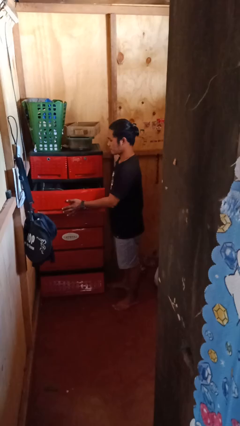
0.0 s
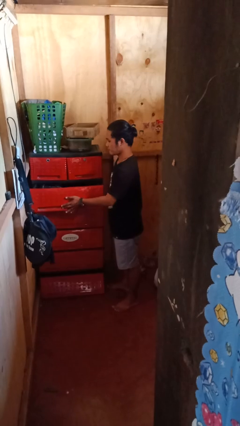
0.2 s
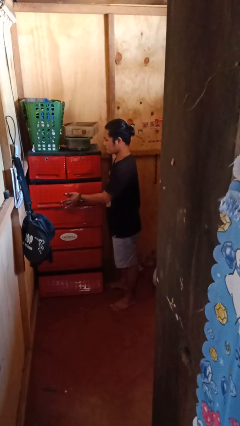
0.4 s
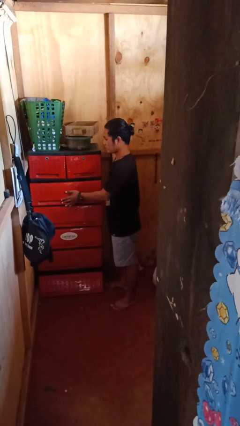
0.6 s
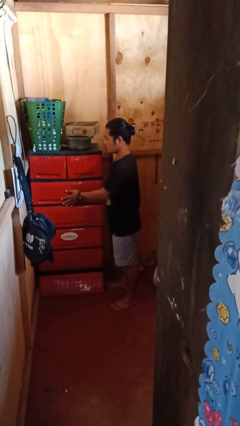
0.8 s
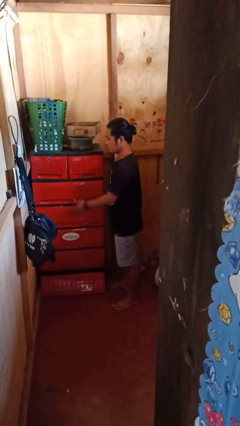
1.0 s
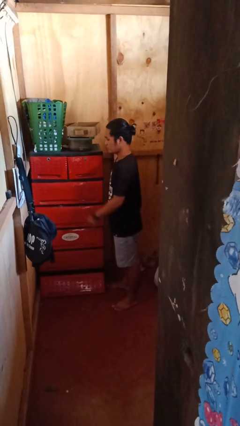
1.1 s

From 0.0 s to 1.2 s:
person closes dresser drawer

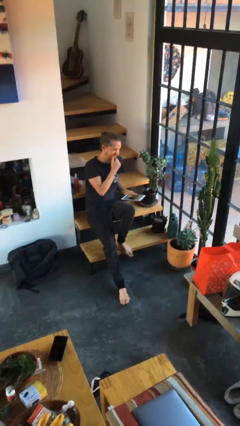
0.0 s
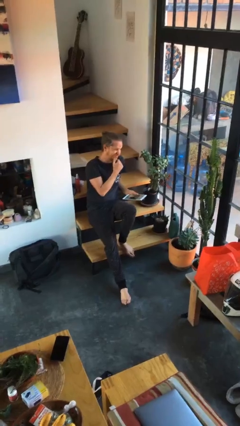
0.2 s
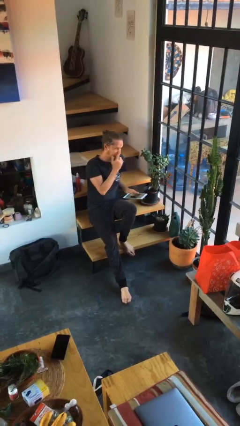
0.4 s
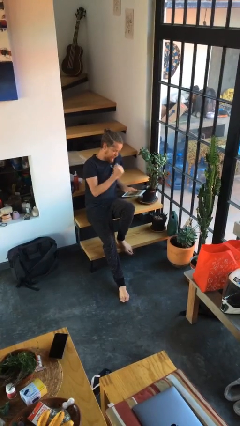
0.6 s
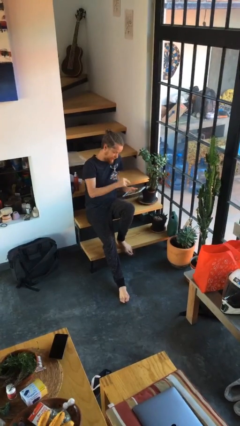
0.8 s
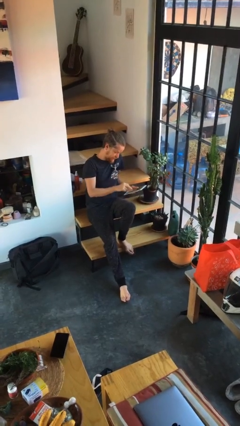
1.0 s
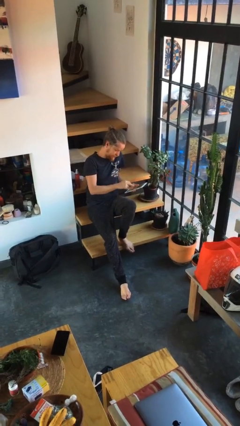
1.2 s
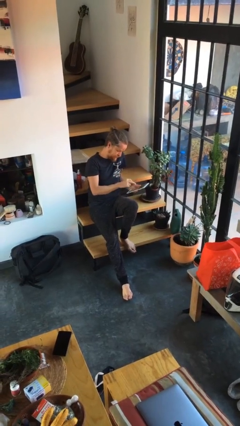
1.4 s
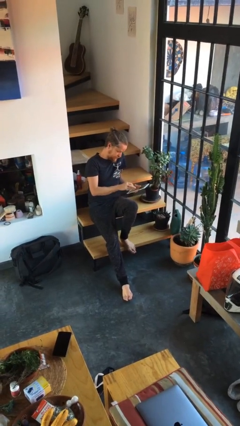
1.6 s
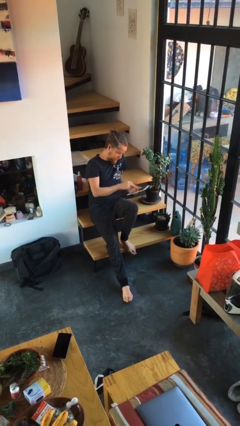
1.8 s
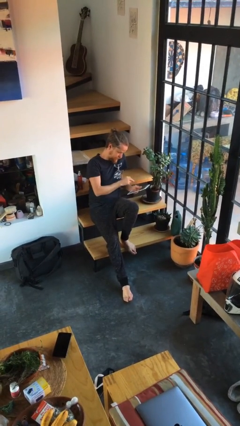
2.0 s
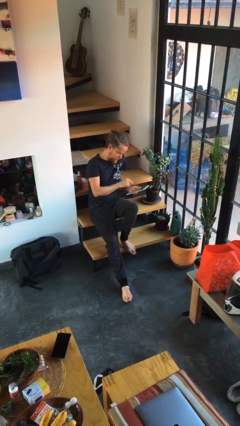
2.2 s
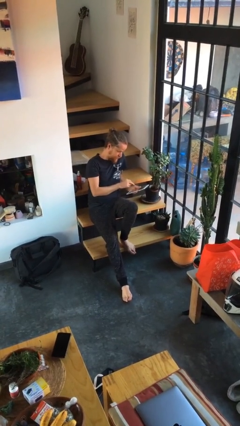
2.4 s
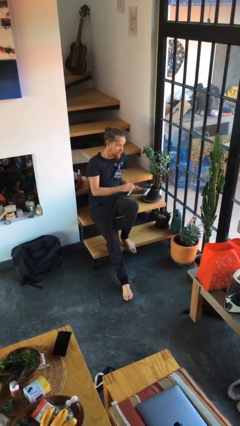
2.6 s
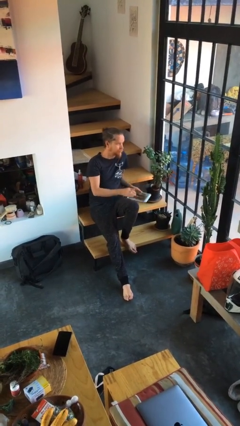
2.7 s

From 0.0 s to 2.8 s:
person interacts with tablet

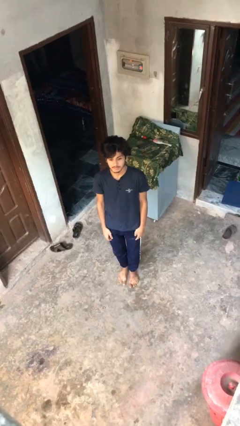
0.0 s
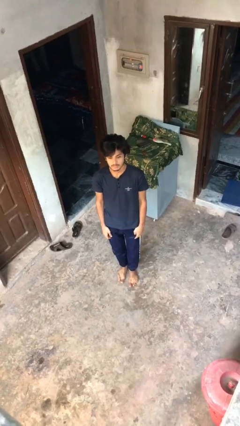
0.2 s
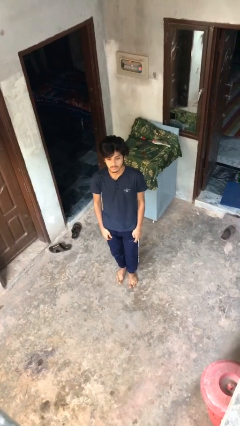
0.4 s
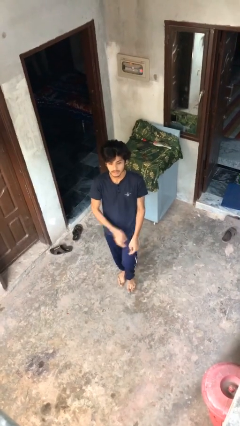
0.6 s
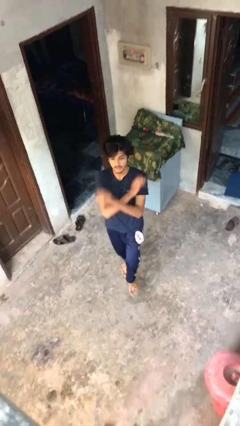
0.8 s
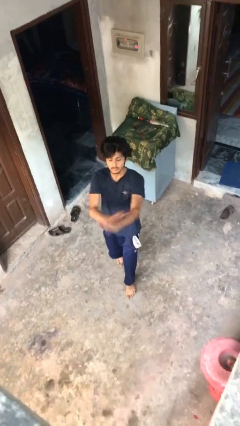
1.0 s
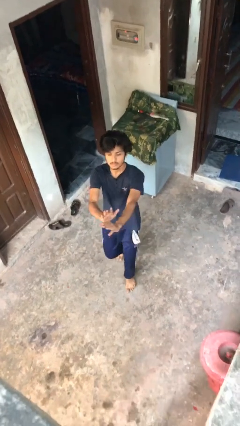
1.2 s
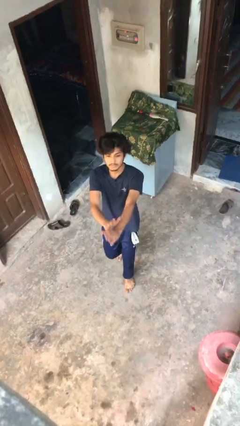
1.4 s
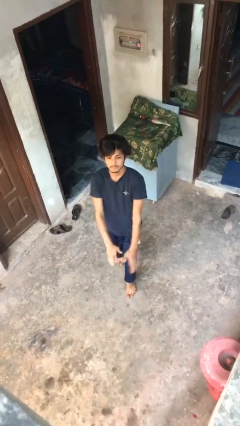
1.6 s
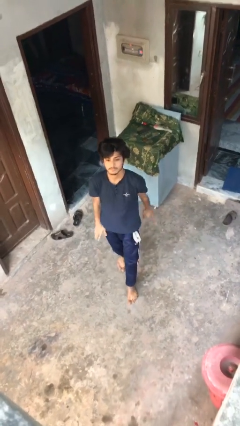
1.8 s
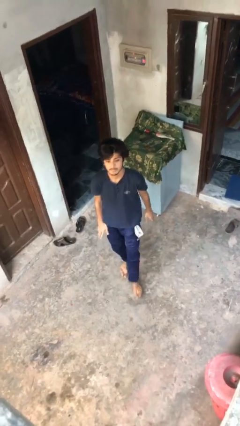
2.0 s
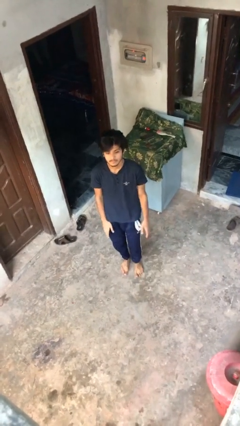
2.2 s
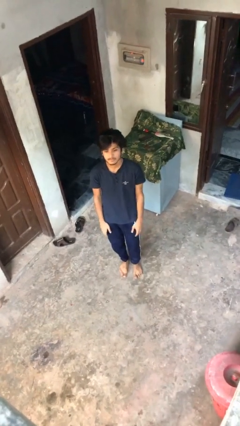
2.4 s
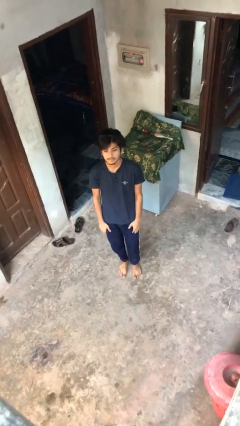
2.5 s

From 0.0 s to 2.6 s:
person karate chop

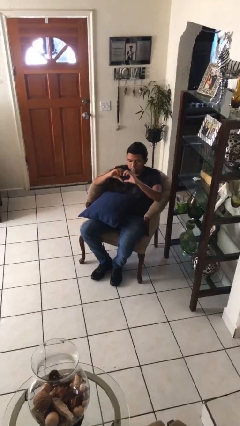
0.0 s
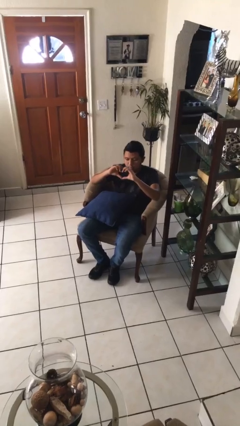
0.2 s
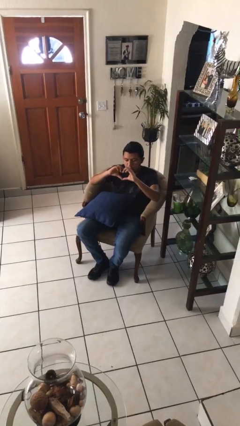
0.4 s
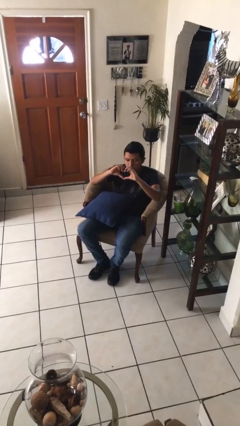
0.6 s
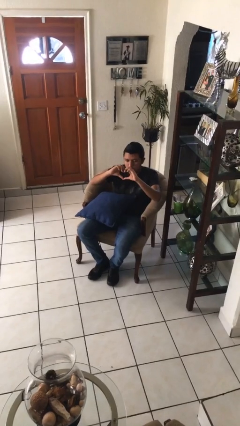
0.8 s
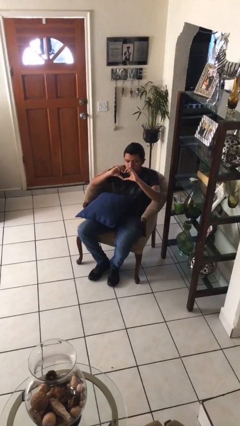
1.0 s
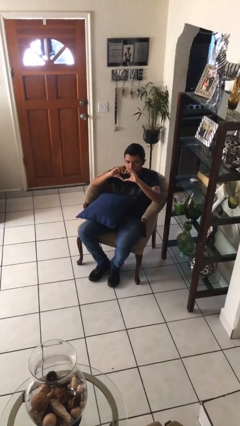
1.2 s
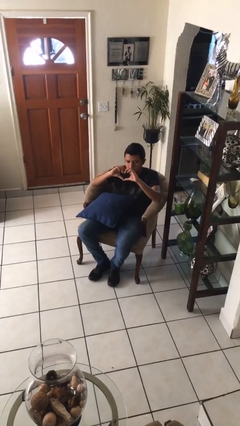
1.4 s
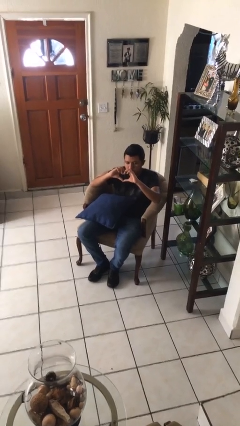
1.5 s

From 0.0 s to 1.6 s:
person gestures heart

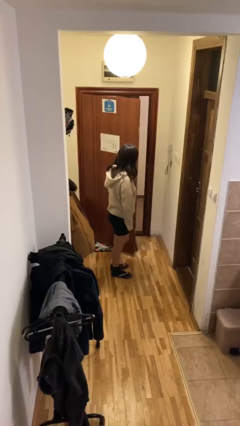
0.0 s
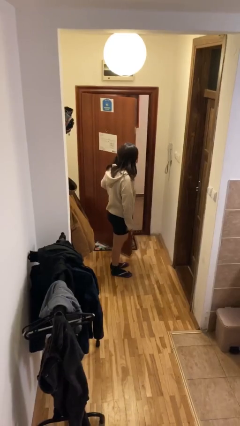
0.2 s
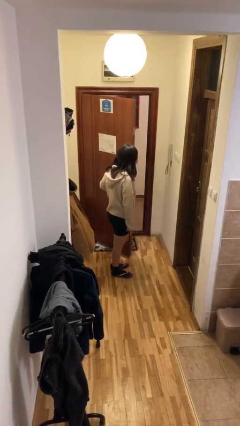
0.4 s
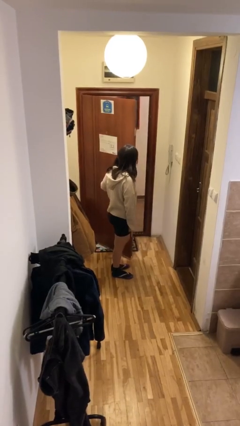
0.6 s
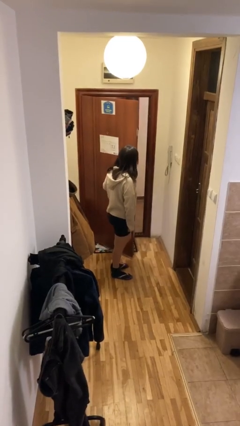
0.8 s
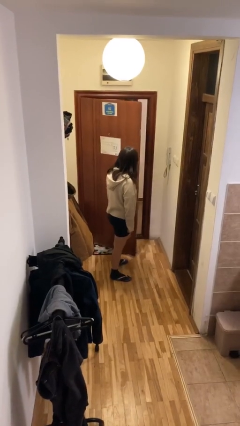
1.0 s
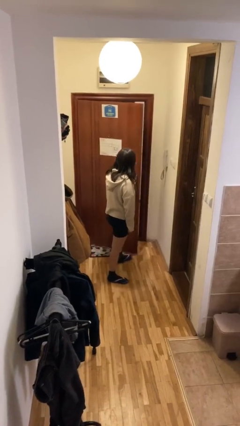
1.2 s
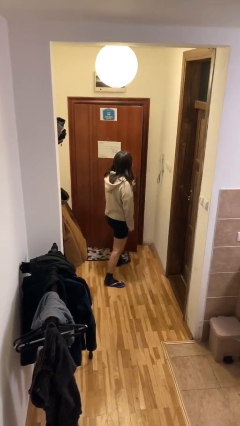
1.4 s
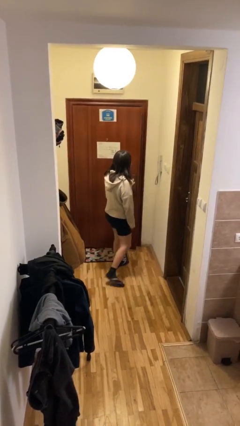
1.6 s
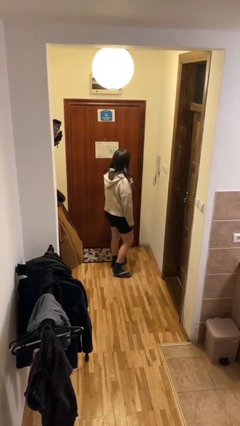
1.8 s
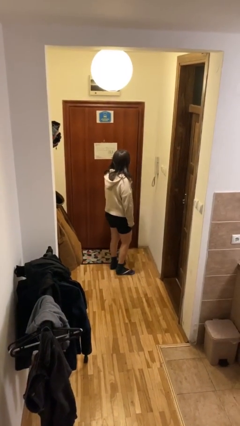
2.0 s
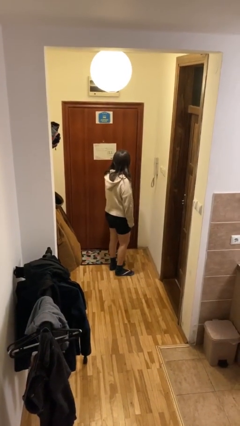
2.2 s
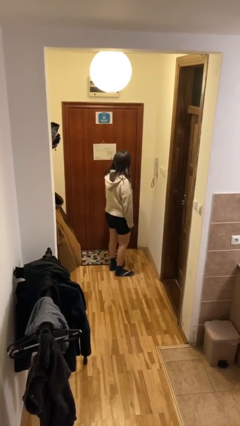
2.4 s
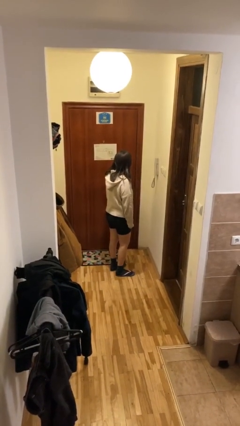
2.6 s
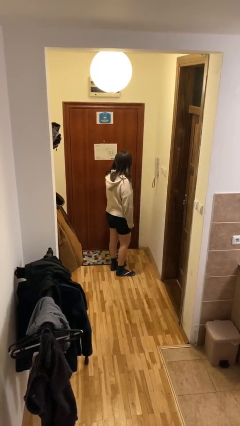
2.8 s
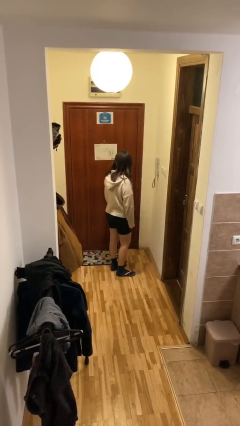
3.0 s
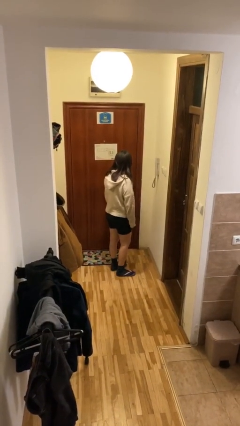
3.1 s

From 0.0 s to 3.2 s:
person opens facility door

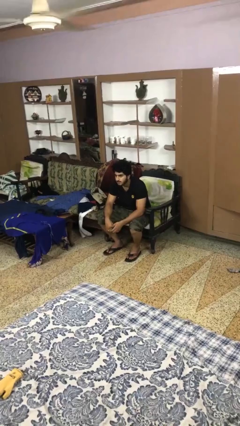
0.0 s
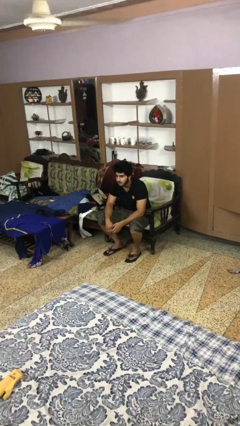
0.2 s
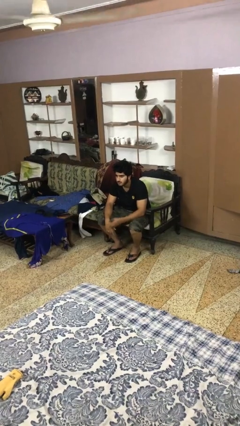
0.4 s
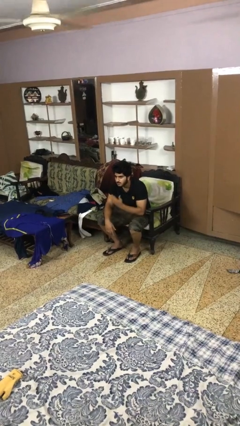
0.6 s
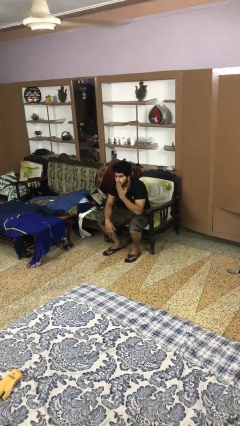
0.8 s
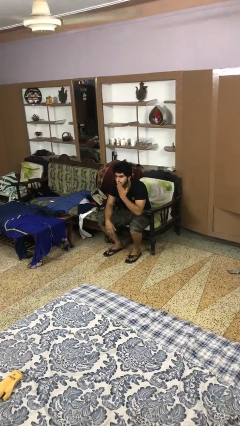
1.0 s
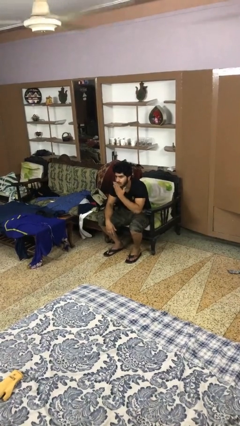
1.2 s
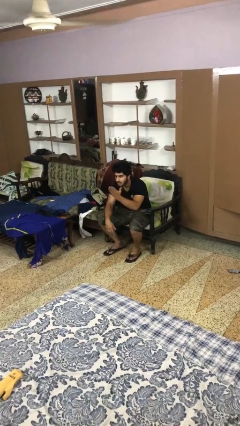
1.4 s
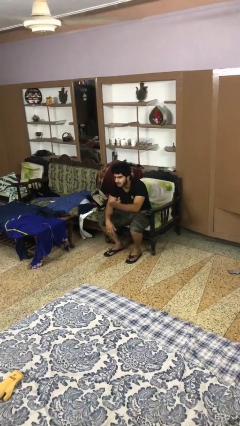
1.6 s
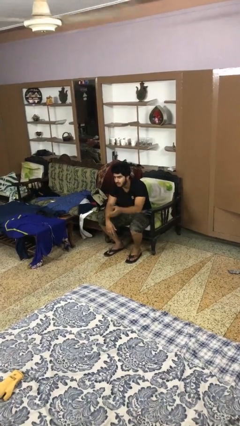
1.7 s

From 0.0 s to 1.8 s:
person gestures blow kiss

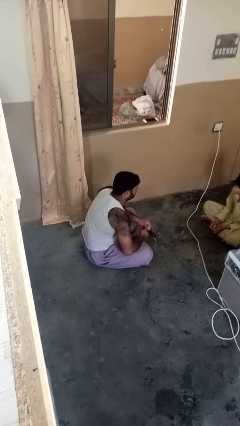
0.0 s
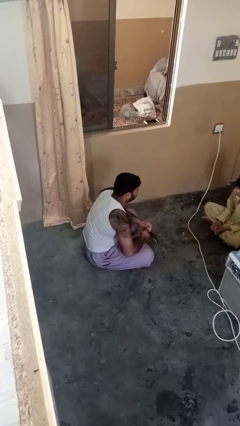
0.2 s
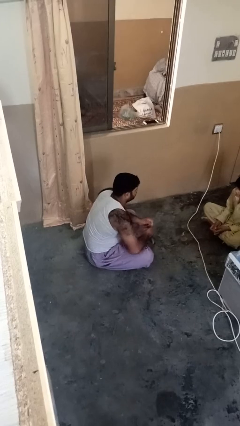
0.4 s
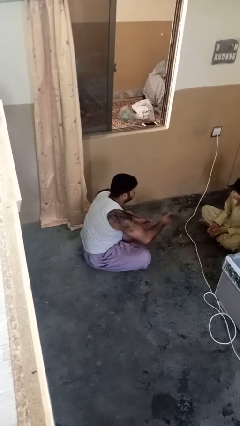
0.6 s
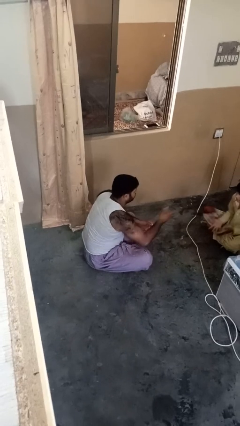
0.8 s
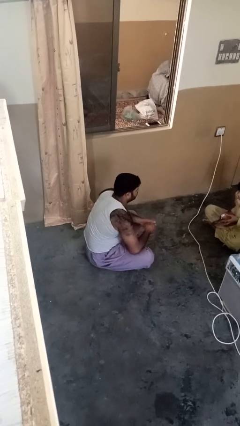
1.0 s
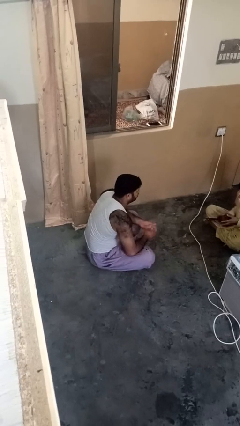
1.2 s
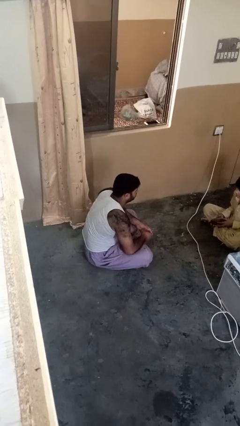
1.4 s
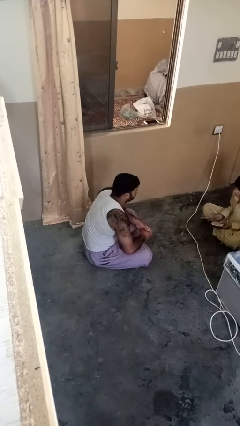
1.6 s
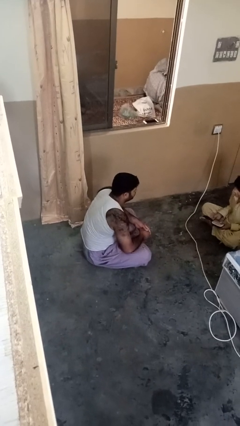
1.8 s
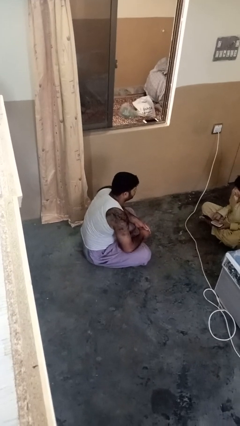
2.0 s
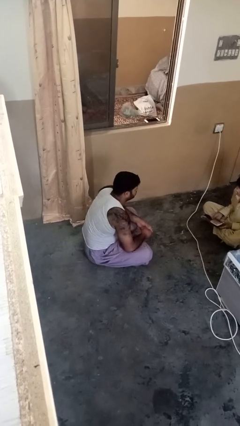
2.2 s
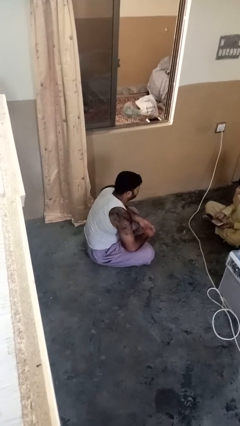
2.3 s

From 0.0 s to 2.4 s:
person throws object to person

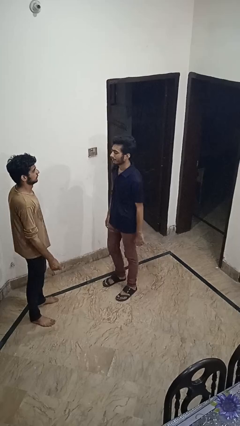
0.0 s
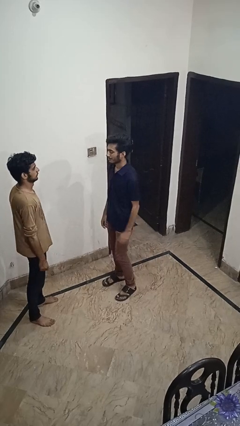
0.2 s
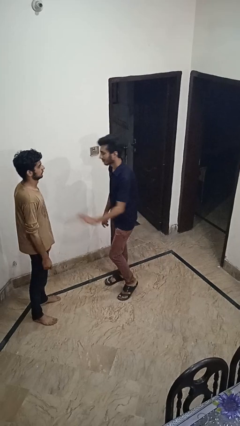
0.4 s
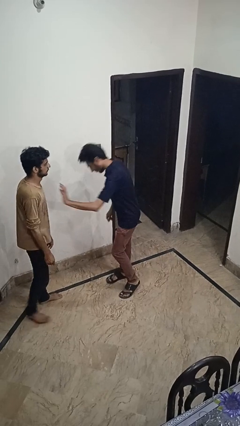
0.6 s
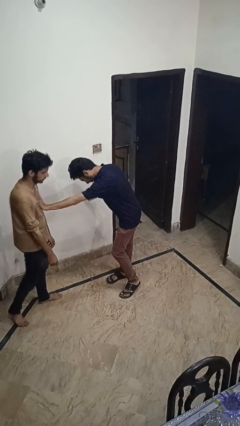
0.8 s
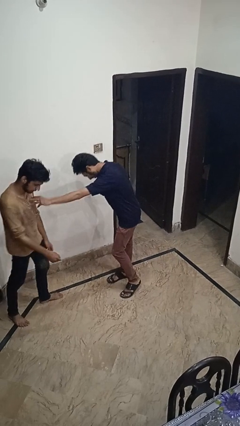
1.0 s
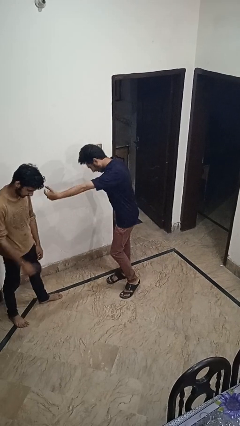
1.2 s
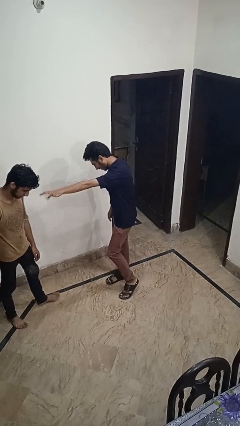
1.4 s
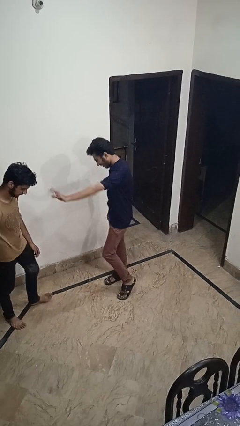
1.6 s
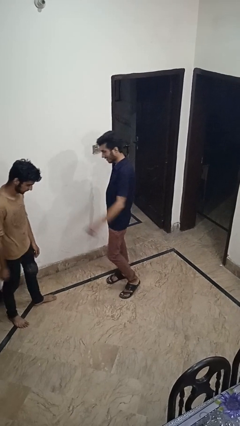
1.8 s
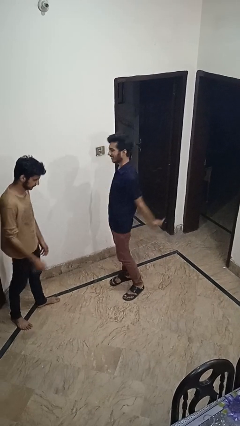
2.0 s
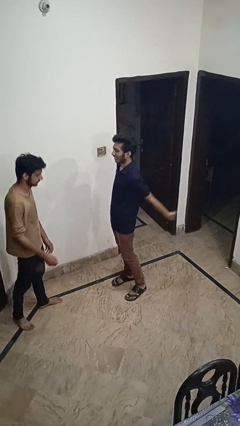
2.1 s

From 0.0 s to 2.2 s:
person shoves person
